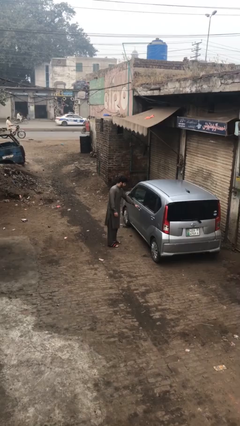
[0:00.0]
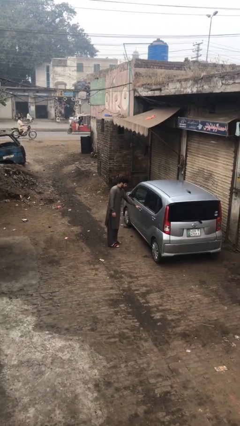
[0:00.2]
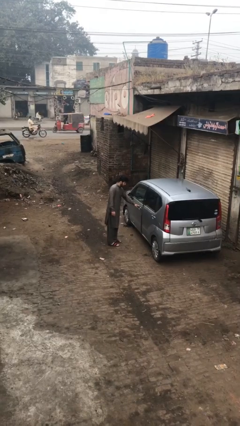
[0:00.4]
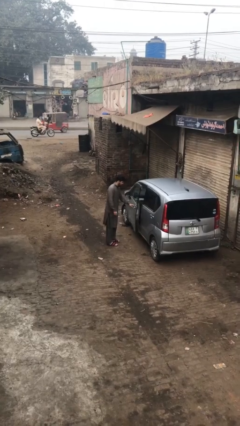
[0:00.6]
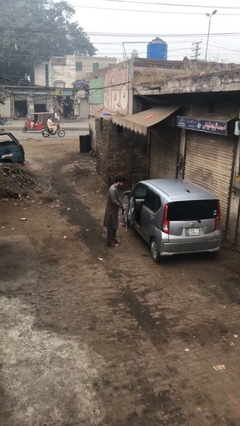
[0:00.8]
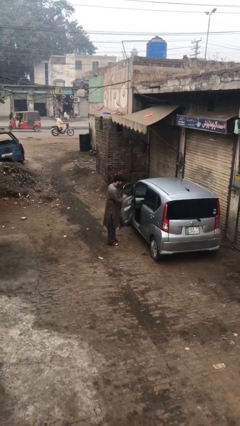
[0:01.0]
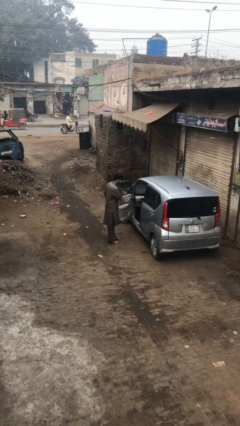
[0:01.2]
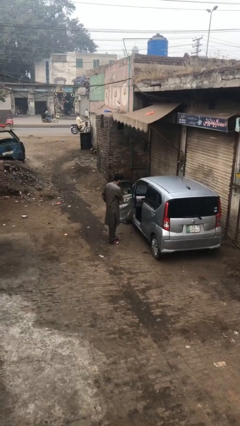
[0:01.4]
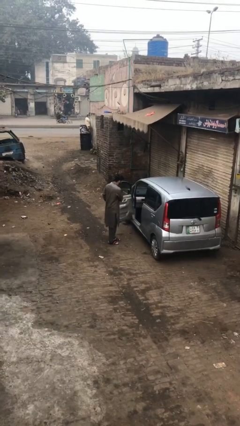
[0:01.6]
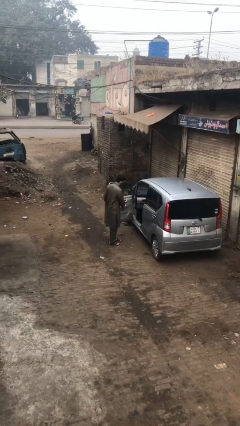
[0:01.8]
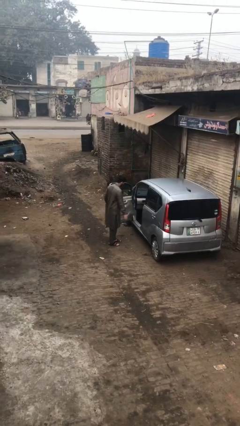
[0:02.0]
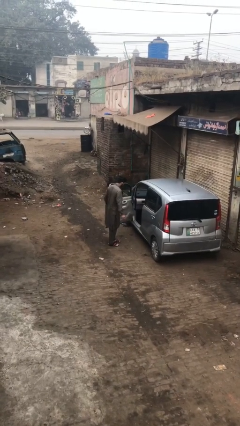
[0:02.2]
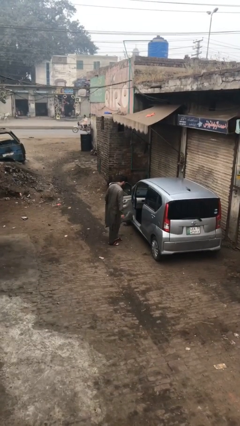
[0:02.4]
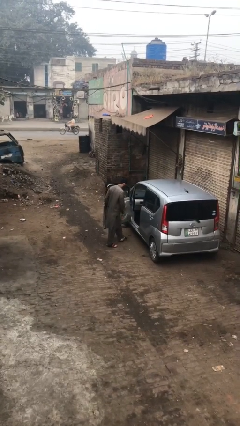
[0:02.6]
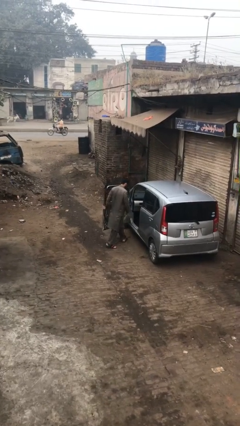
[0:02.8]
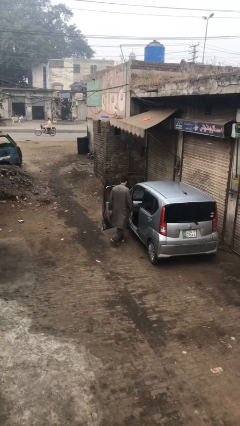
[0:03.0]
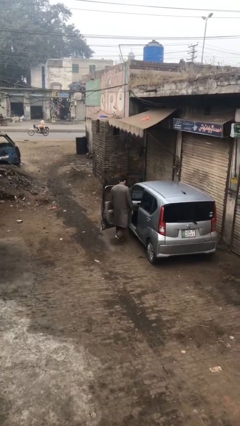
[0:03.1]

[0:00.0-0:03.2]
person opens car door

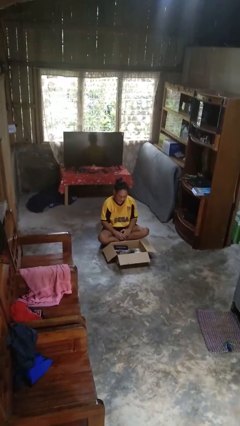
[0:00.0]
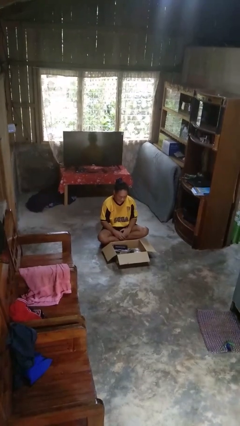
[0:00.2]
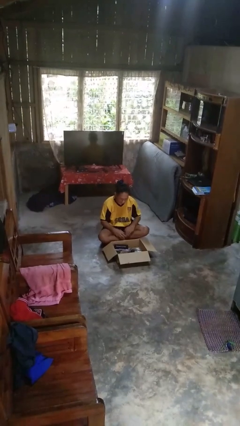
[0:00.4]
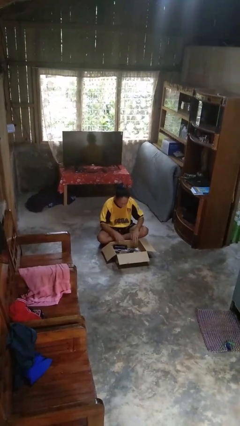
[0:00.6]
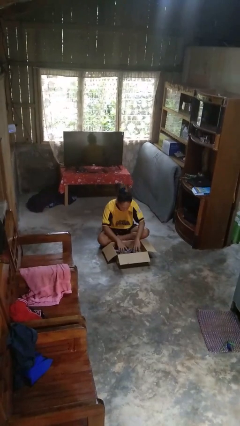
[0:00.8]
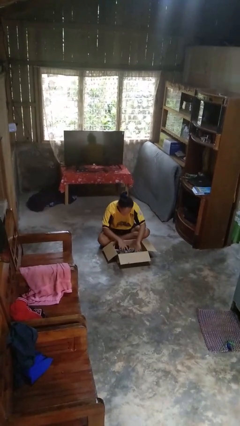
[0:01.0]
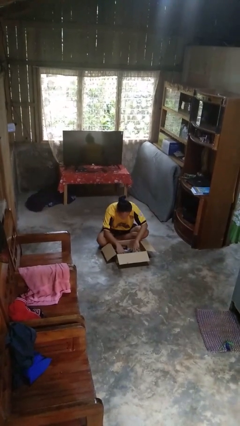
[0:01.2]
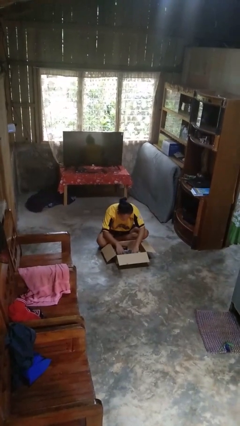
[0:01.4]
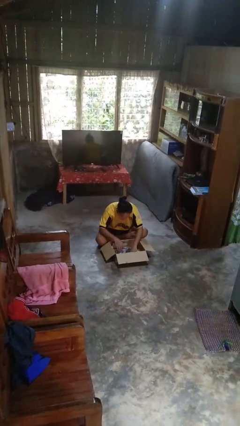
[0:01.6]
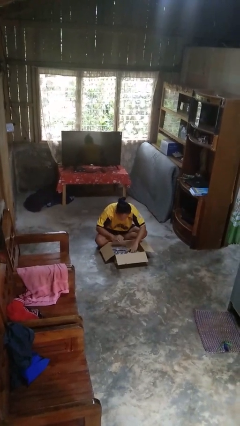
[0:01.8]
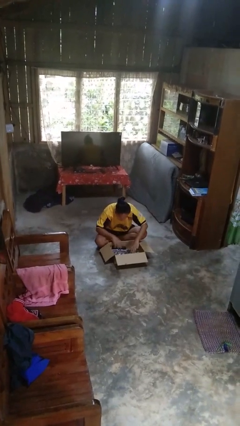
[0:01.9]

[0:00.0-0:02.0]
person searches in box

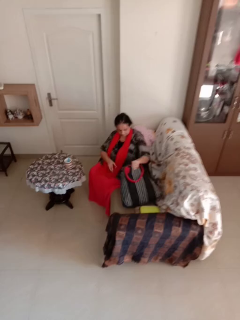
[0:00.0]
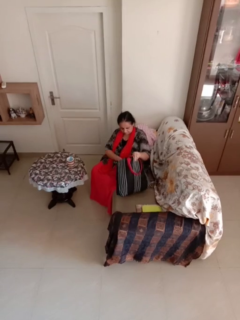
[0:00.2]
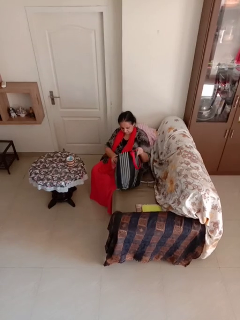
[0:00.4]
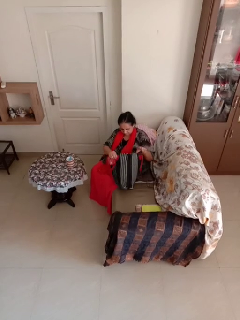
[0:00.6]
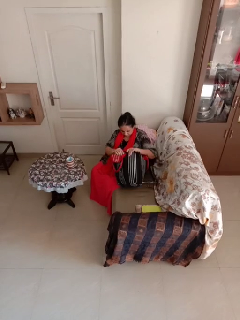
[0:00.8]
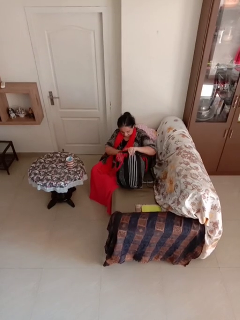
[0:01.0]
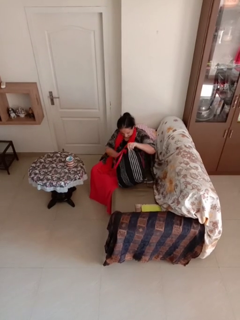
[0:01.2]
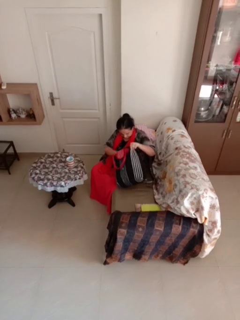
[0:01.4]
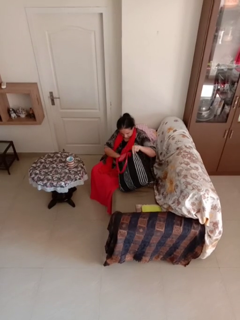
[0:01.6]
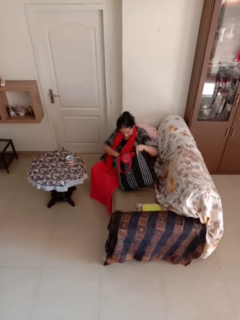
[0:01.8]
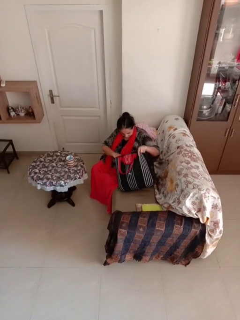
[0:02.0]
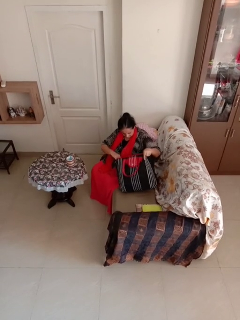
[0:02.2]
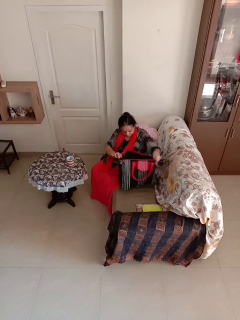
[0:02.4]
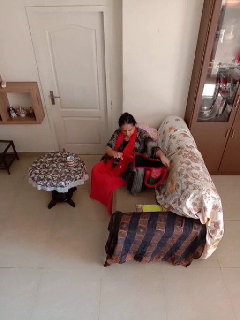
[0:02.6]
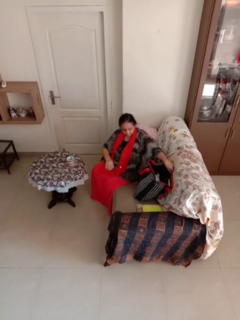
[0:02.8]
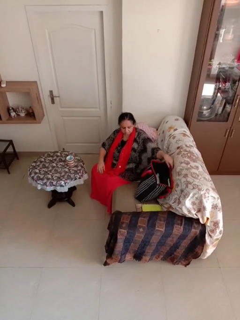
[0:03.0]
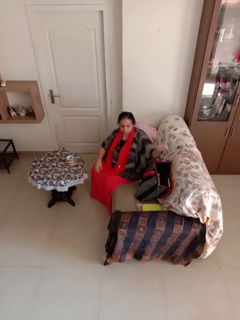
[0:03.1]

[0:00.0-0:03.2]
person searches in bag

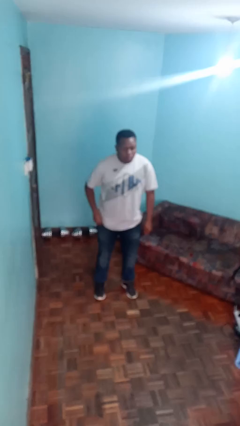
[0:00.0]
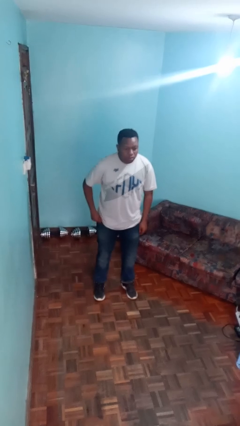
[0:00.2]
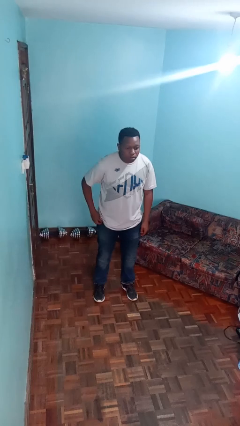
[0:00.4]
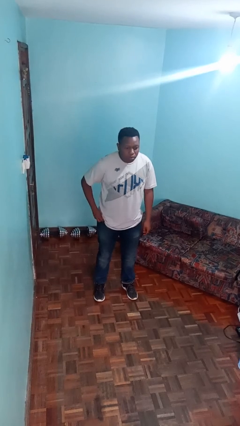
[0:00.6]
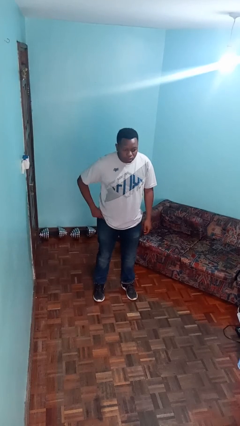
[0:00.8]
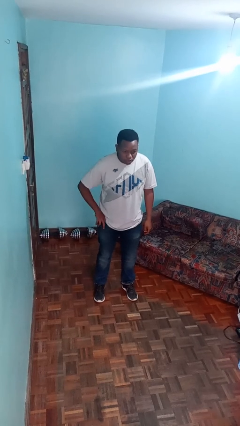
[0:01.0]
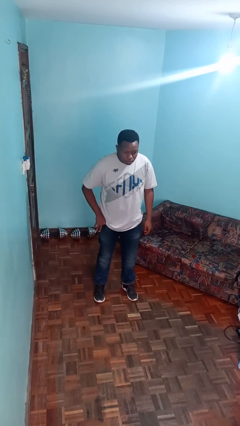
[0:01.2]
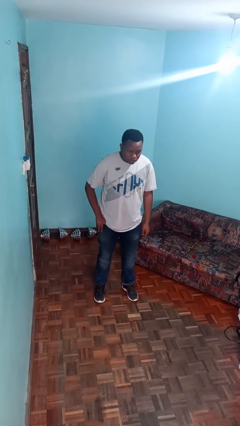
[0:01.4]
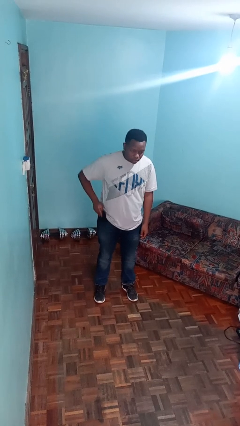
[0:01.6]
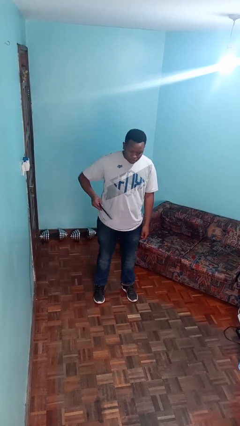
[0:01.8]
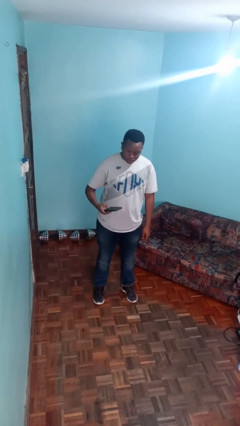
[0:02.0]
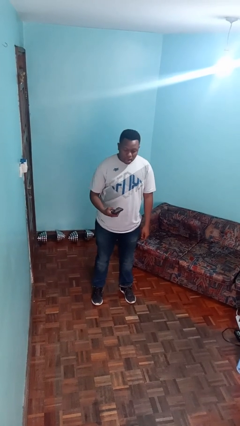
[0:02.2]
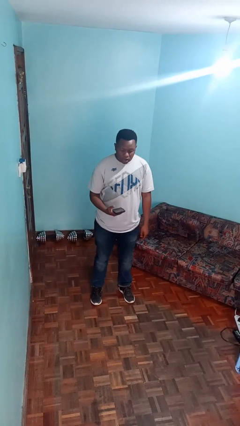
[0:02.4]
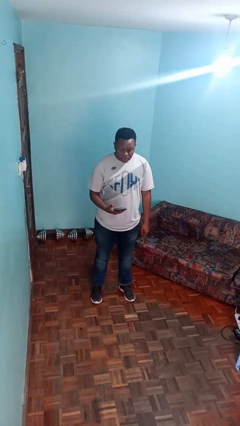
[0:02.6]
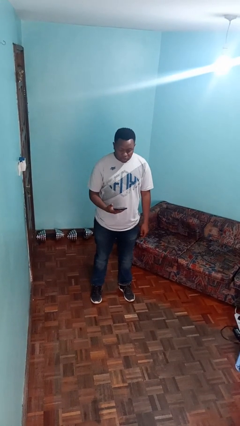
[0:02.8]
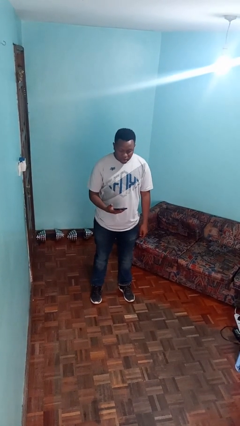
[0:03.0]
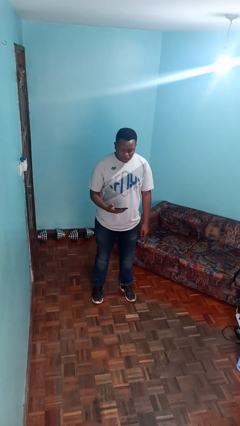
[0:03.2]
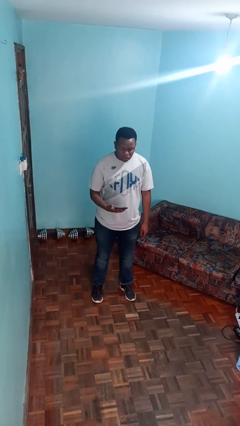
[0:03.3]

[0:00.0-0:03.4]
person takes phone from pocket

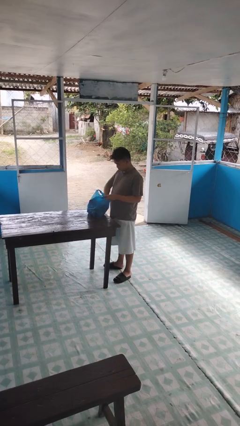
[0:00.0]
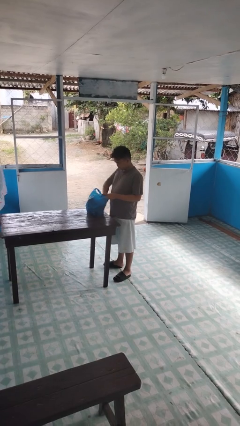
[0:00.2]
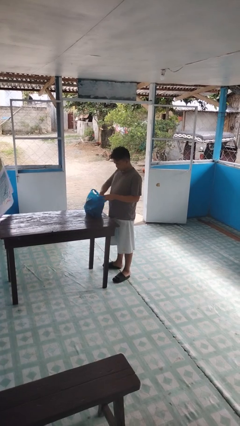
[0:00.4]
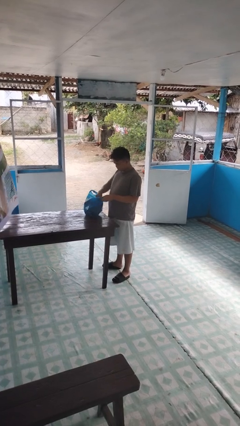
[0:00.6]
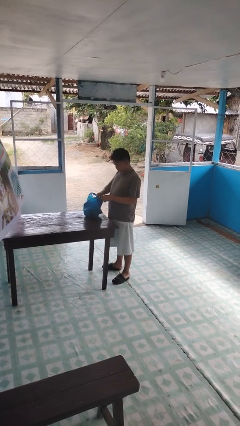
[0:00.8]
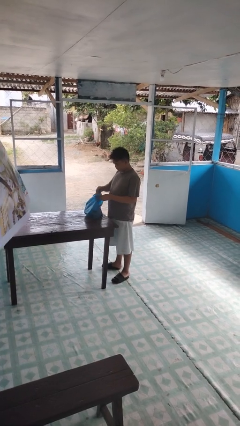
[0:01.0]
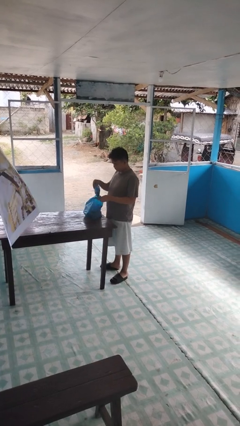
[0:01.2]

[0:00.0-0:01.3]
person takes object from bag

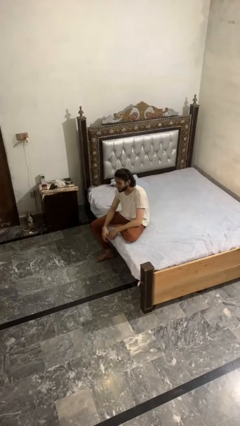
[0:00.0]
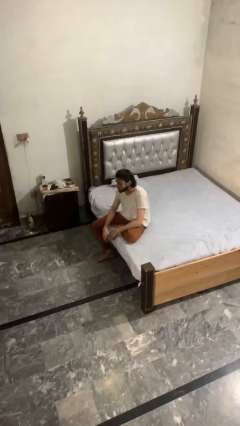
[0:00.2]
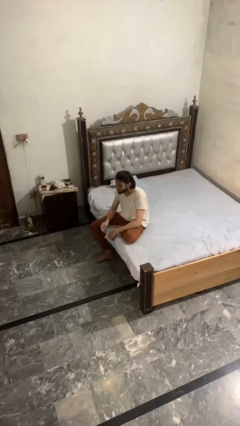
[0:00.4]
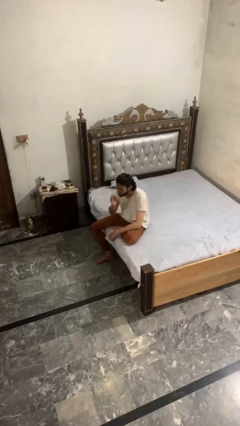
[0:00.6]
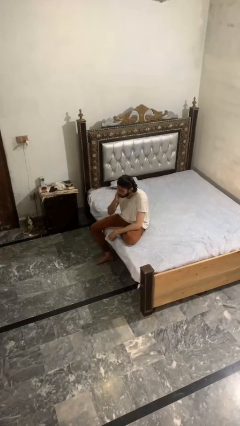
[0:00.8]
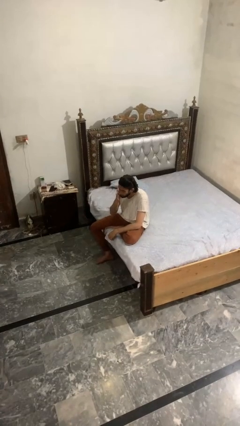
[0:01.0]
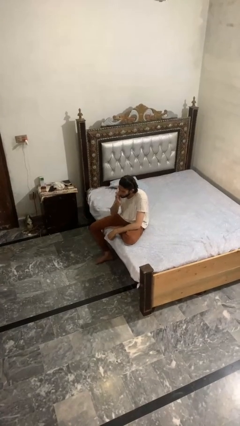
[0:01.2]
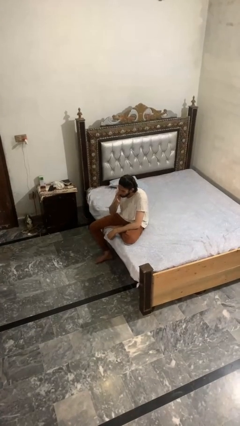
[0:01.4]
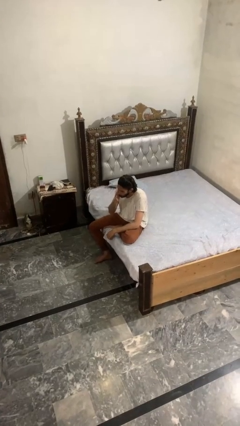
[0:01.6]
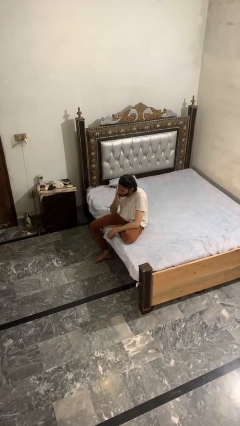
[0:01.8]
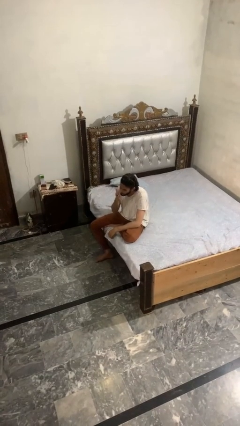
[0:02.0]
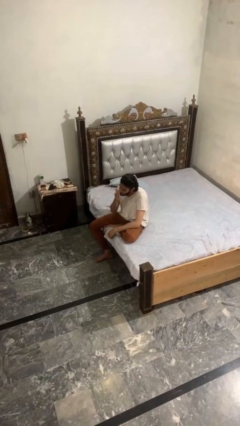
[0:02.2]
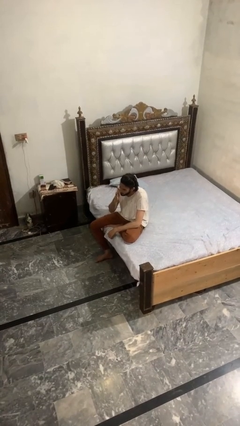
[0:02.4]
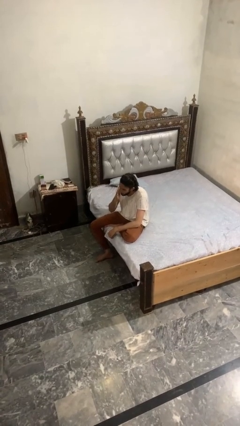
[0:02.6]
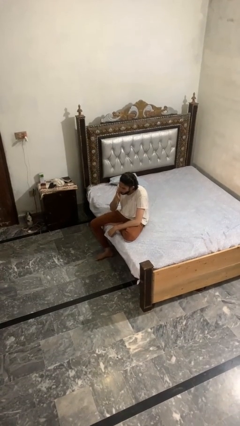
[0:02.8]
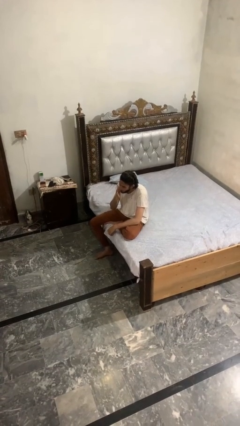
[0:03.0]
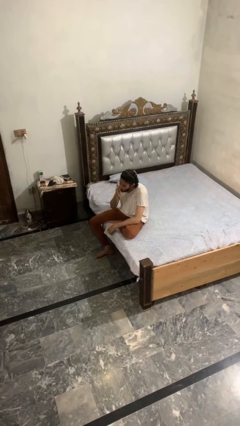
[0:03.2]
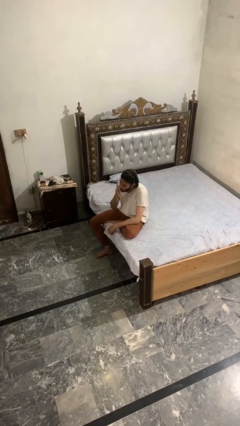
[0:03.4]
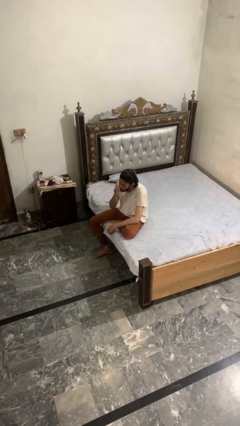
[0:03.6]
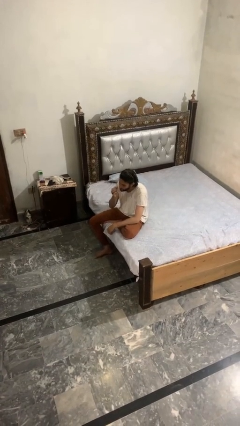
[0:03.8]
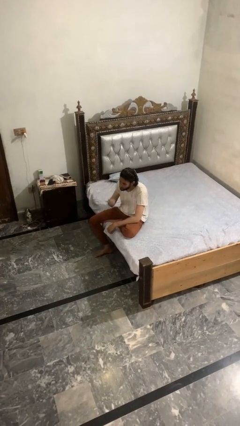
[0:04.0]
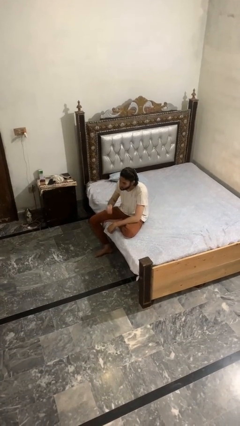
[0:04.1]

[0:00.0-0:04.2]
person scratches face

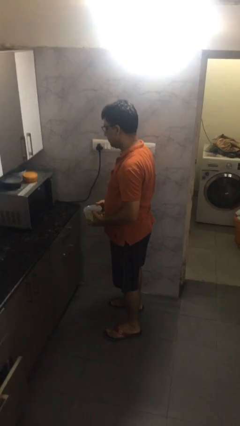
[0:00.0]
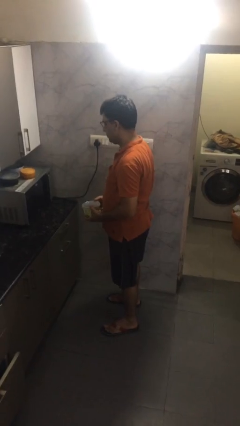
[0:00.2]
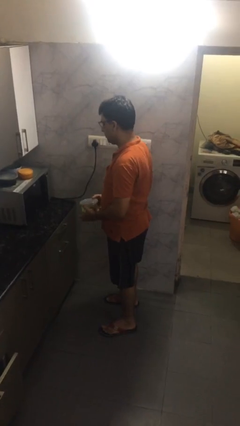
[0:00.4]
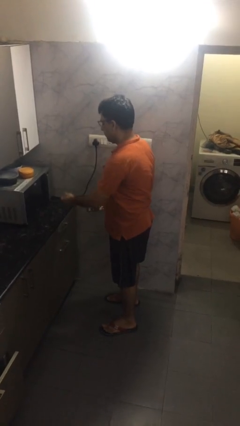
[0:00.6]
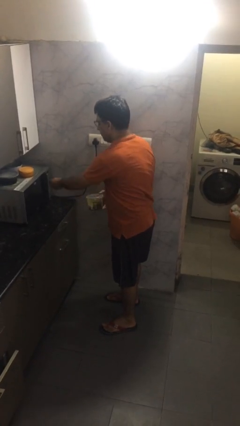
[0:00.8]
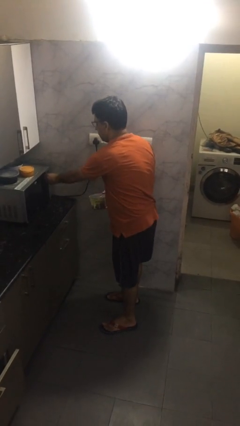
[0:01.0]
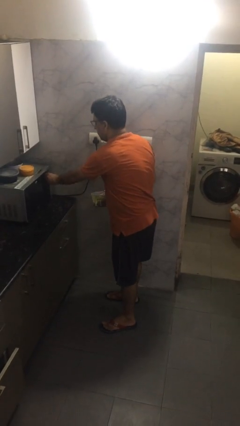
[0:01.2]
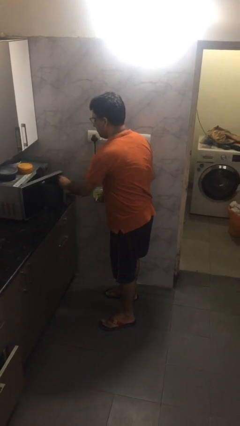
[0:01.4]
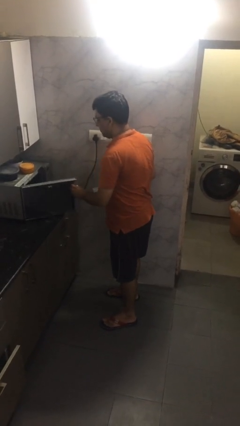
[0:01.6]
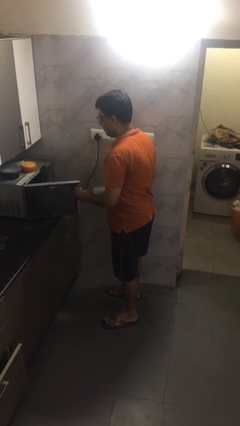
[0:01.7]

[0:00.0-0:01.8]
person opens microwave
